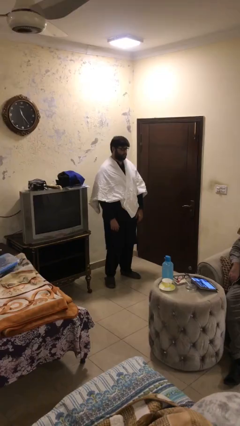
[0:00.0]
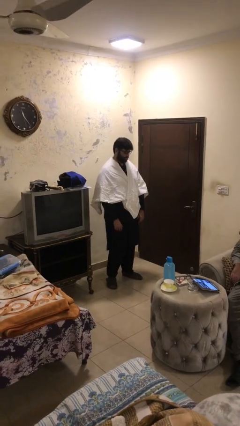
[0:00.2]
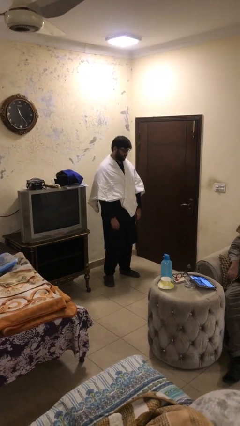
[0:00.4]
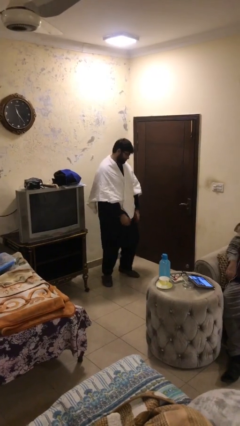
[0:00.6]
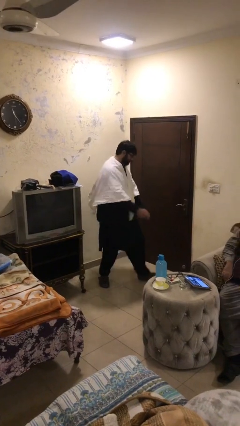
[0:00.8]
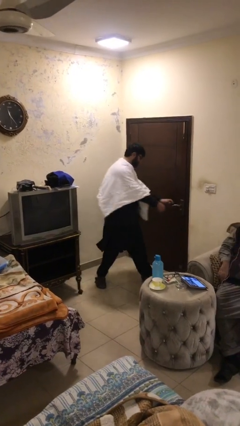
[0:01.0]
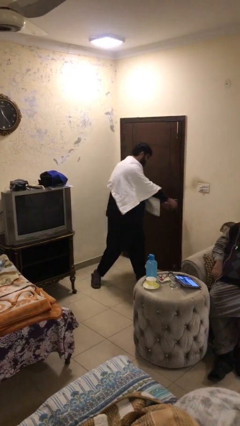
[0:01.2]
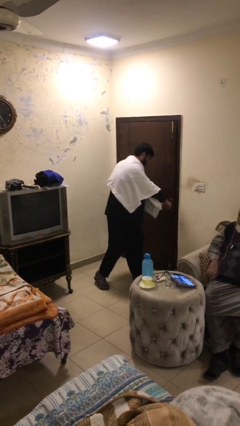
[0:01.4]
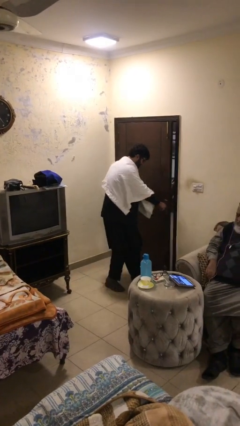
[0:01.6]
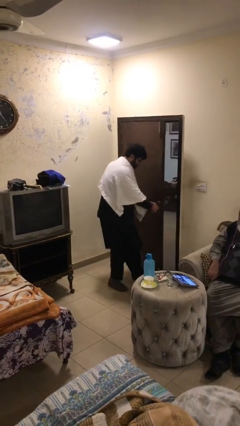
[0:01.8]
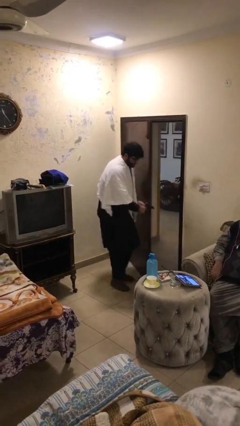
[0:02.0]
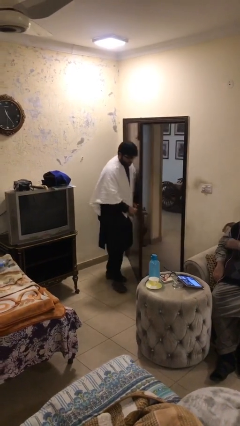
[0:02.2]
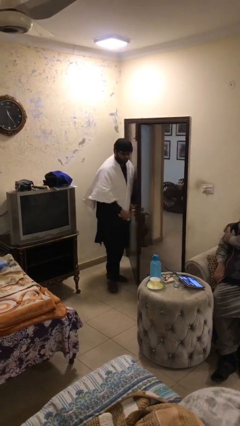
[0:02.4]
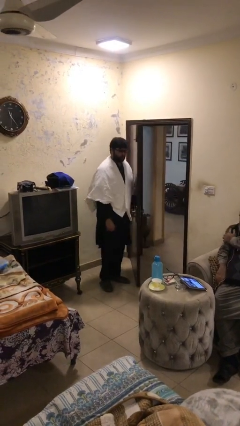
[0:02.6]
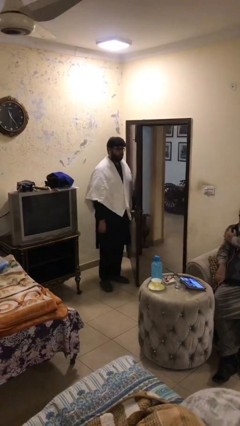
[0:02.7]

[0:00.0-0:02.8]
person opens facility door

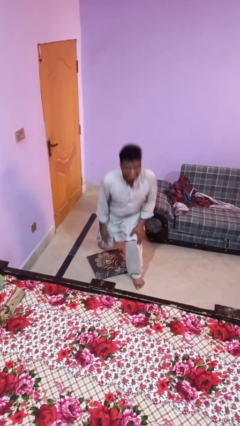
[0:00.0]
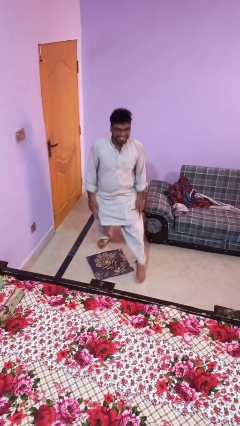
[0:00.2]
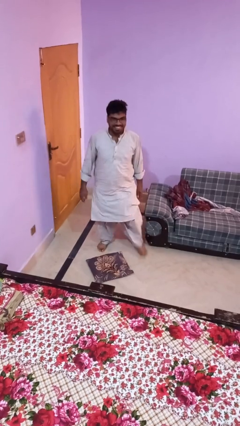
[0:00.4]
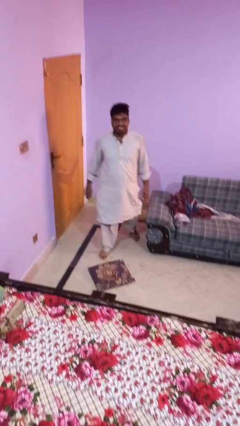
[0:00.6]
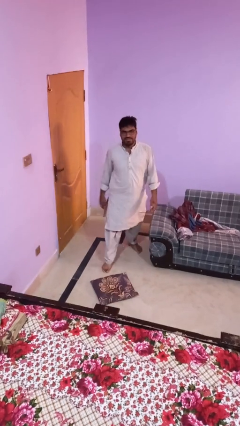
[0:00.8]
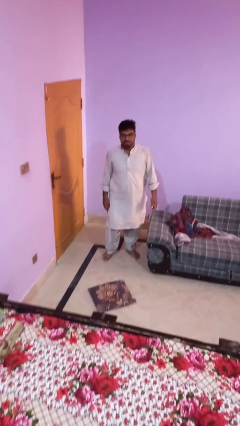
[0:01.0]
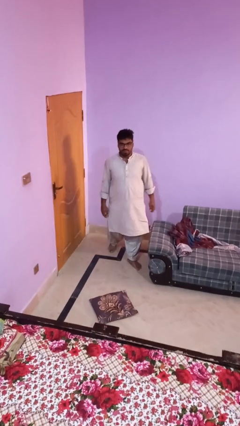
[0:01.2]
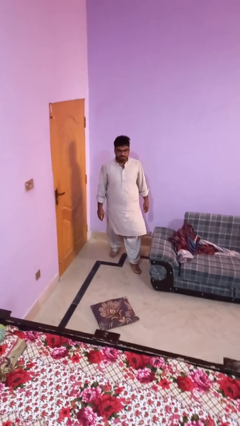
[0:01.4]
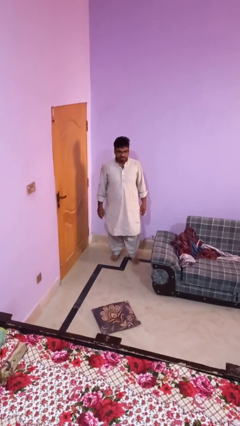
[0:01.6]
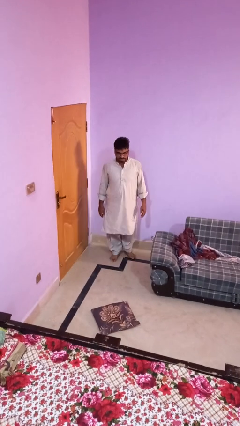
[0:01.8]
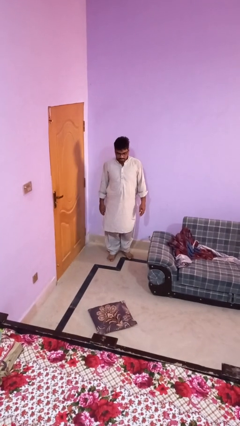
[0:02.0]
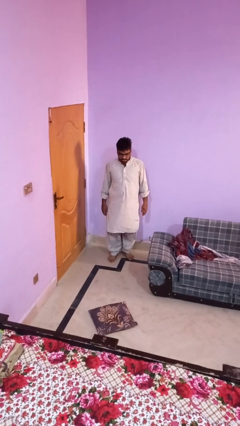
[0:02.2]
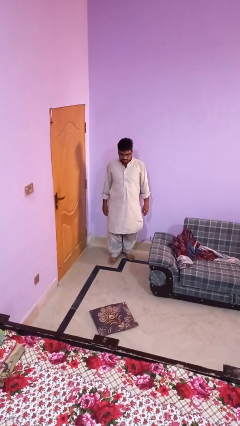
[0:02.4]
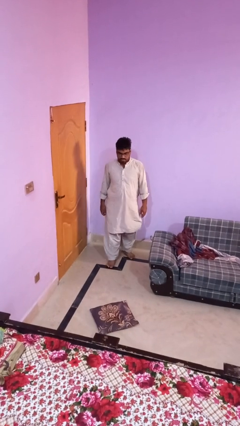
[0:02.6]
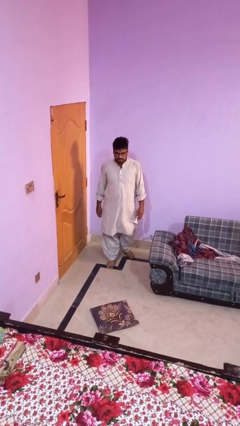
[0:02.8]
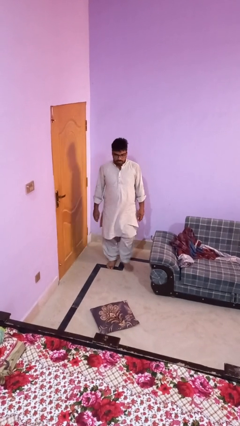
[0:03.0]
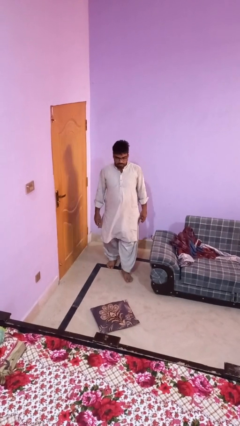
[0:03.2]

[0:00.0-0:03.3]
person stands up from floor

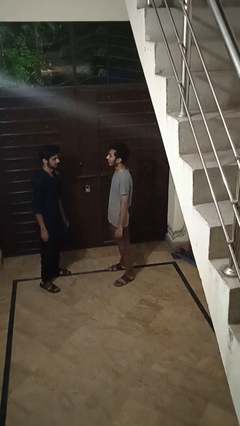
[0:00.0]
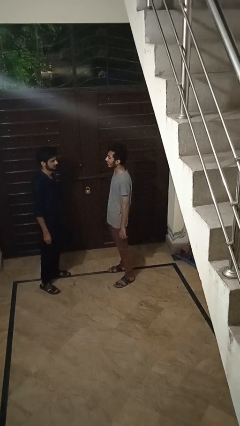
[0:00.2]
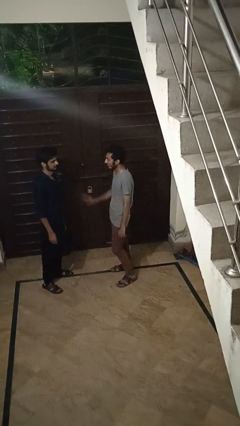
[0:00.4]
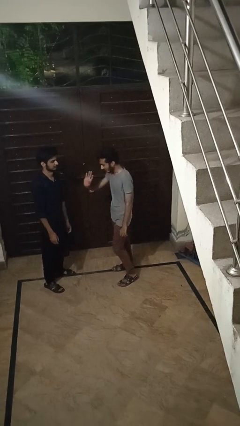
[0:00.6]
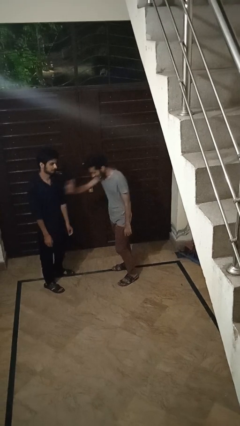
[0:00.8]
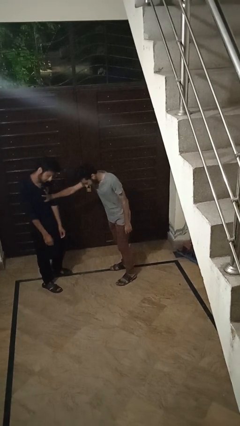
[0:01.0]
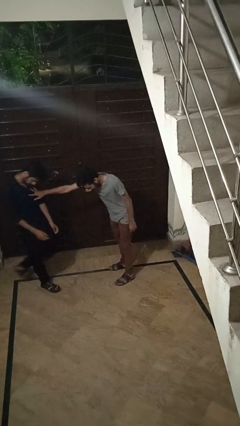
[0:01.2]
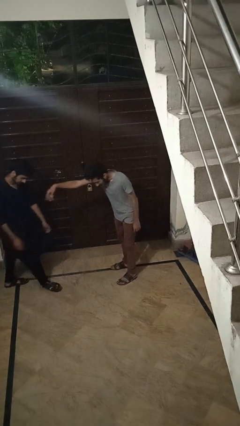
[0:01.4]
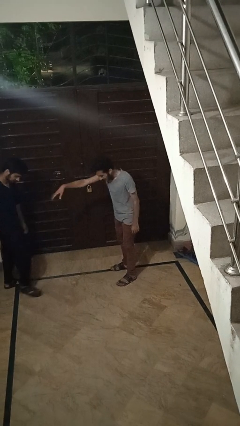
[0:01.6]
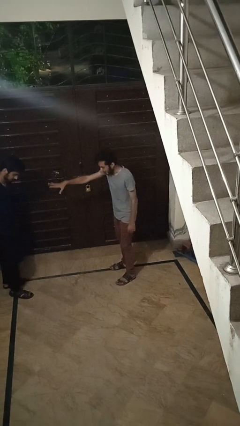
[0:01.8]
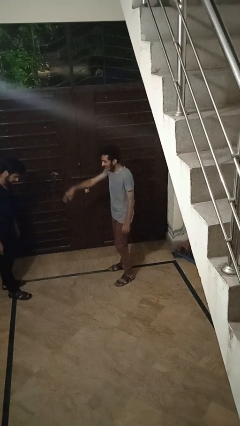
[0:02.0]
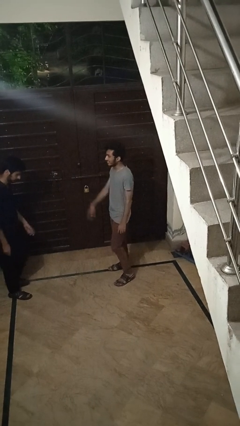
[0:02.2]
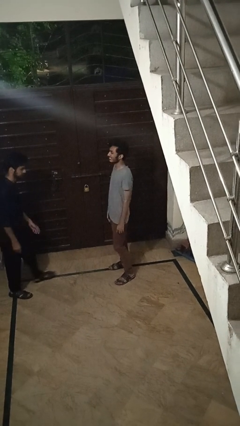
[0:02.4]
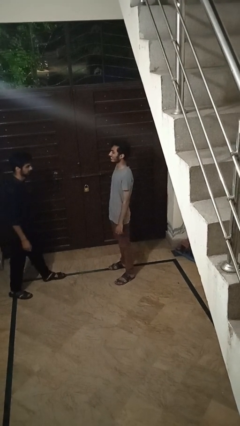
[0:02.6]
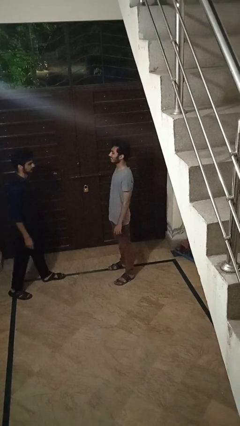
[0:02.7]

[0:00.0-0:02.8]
person shoves person

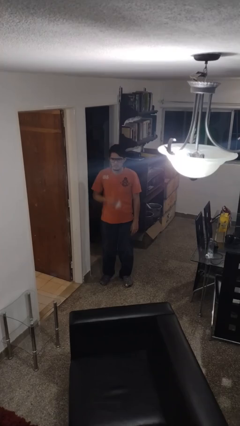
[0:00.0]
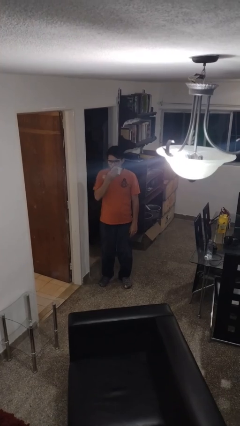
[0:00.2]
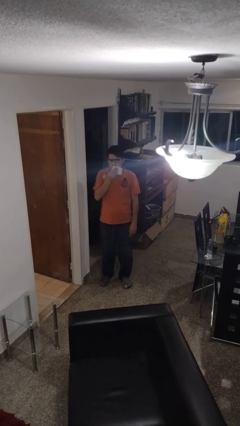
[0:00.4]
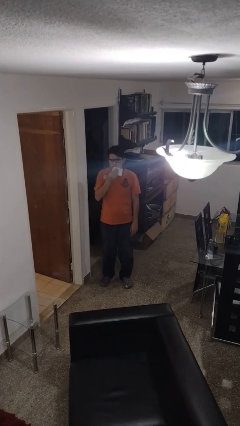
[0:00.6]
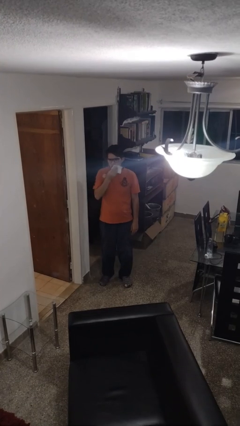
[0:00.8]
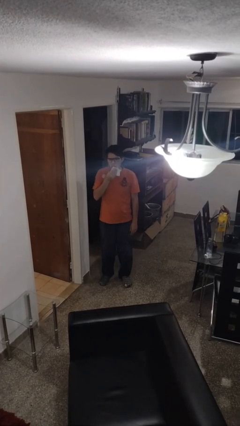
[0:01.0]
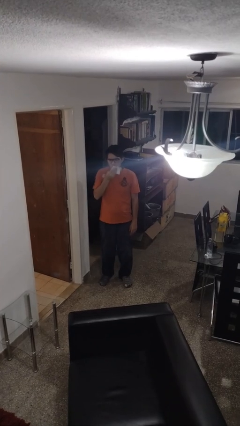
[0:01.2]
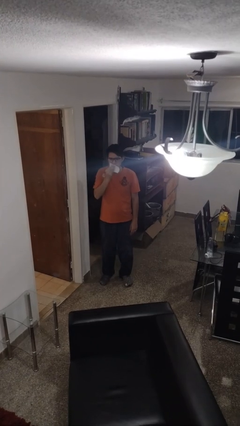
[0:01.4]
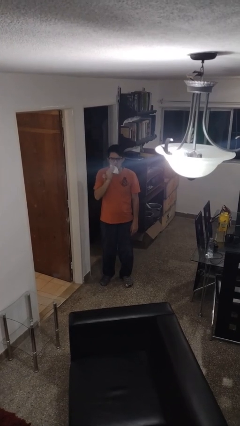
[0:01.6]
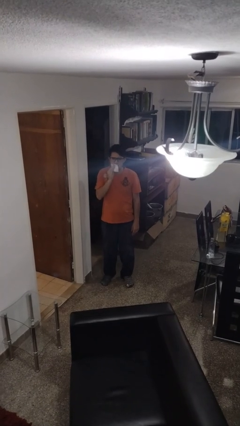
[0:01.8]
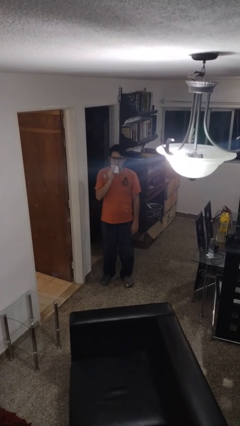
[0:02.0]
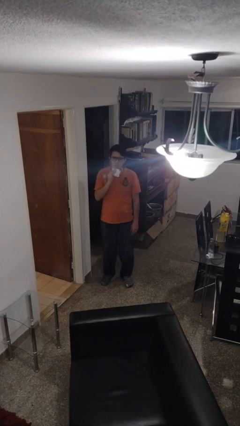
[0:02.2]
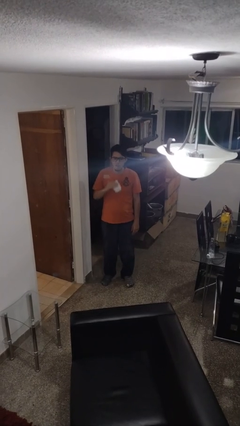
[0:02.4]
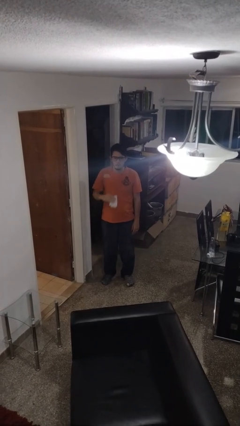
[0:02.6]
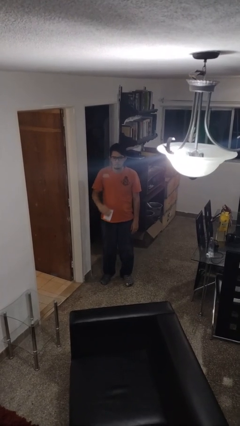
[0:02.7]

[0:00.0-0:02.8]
person wipes mouth with napkin

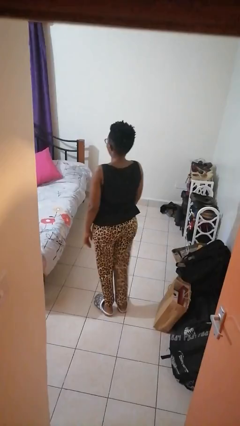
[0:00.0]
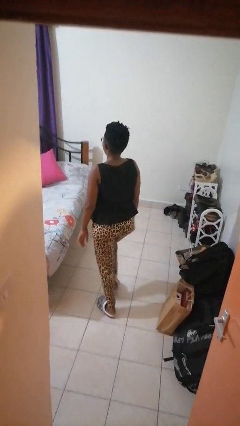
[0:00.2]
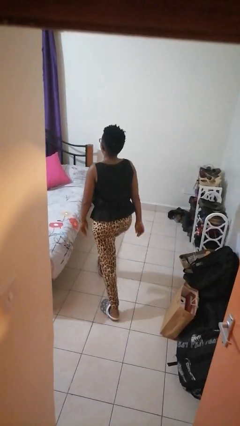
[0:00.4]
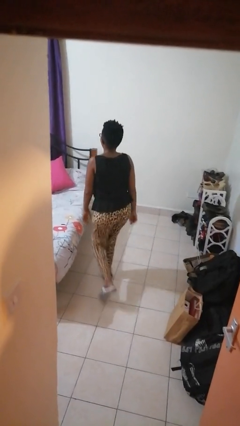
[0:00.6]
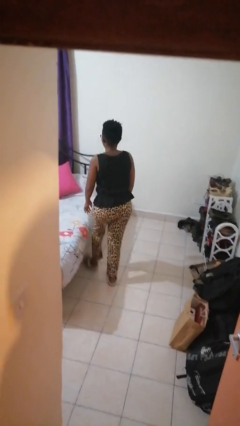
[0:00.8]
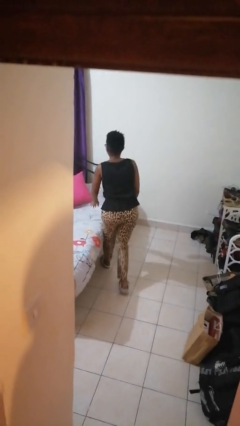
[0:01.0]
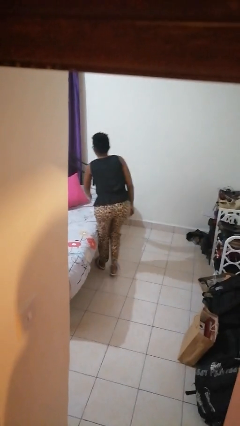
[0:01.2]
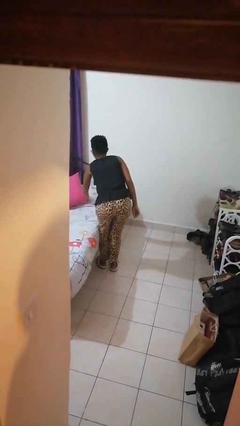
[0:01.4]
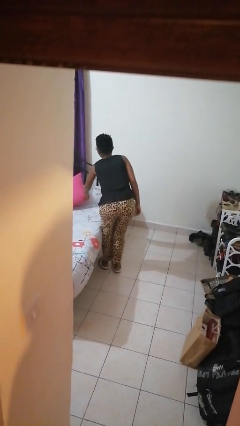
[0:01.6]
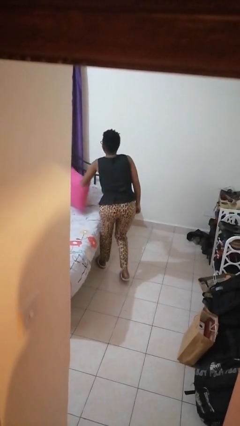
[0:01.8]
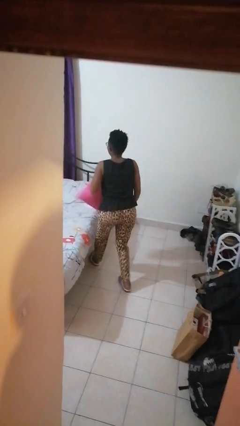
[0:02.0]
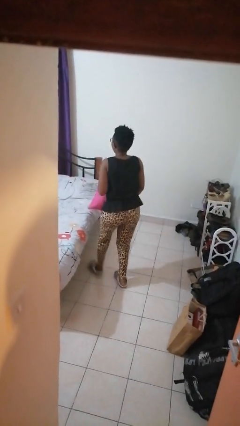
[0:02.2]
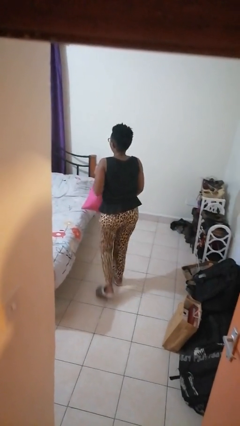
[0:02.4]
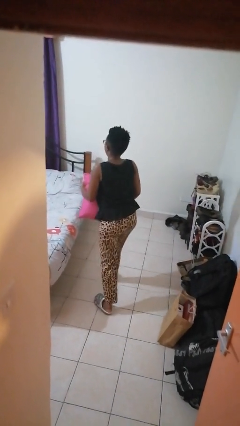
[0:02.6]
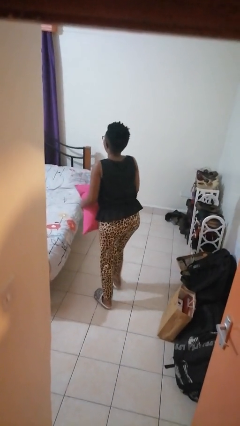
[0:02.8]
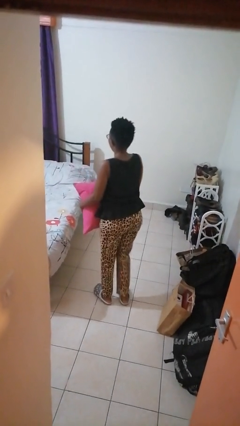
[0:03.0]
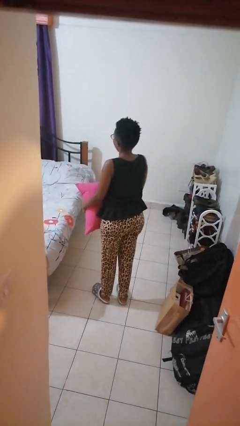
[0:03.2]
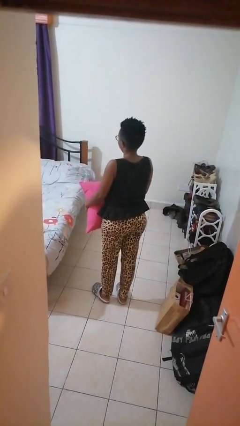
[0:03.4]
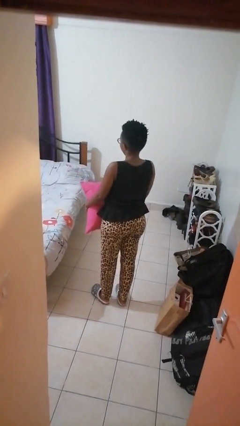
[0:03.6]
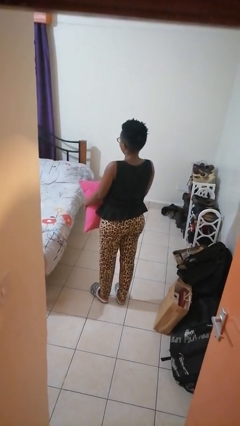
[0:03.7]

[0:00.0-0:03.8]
person picks up object from bed

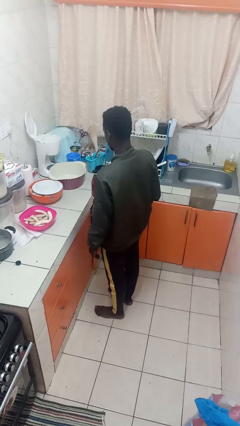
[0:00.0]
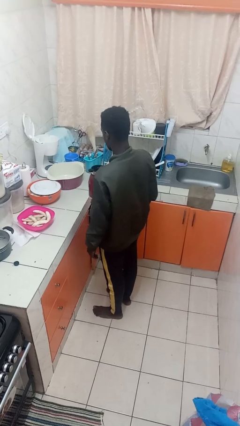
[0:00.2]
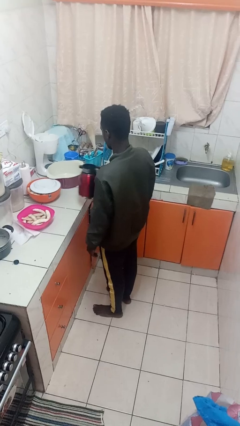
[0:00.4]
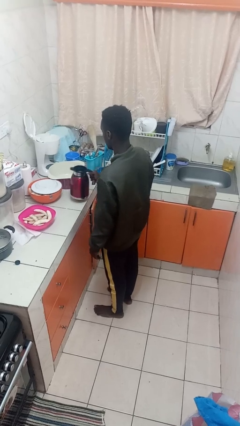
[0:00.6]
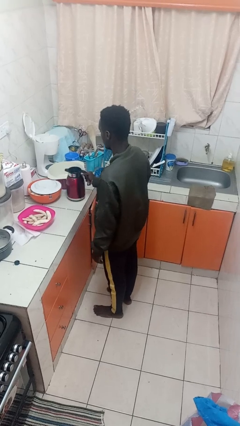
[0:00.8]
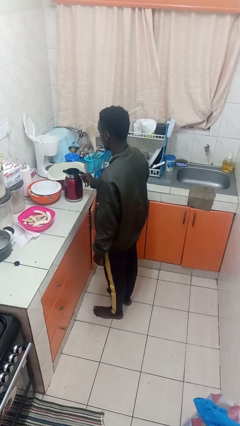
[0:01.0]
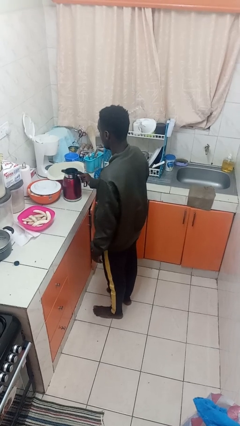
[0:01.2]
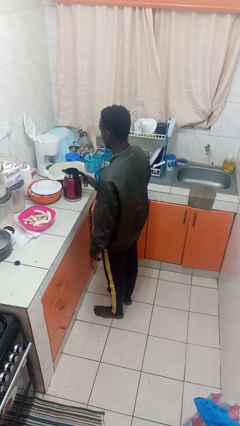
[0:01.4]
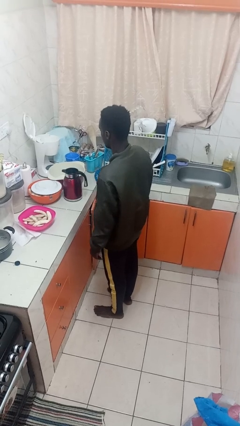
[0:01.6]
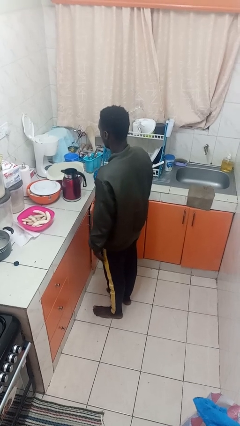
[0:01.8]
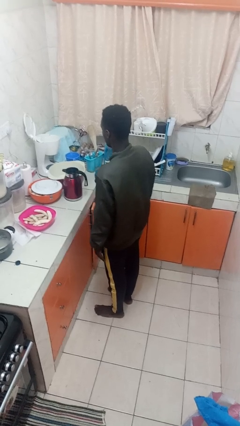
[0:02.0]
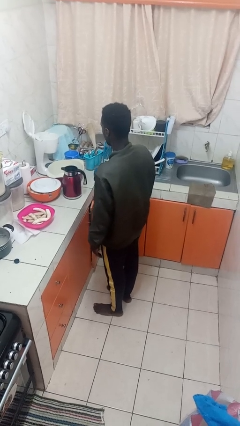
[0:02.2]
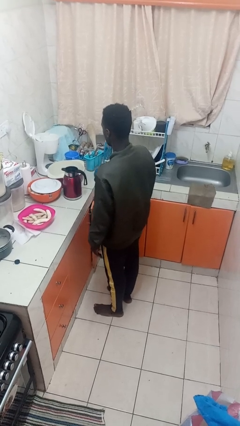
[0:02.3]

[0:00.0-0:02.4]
person puts down object on countertop
